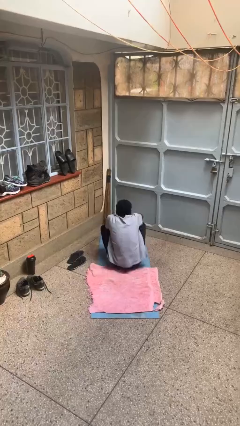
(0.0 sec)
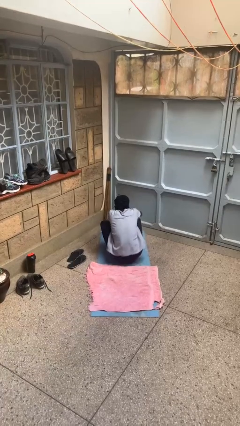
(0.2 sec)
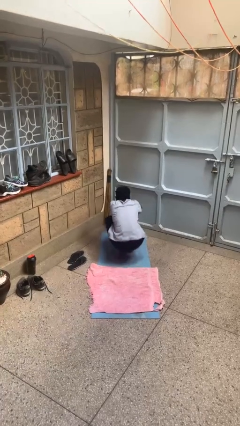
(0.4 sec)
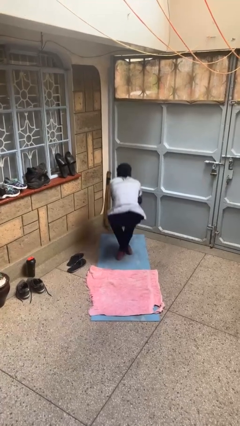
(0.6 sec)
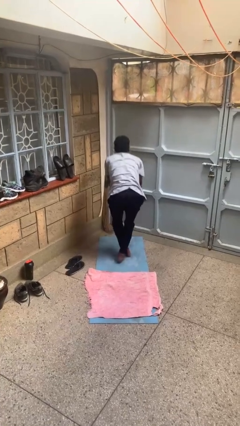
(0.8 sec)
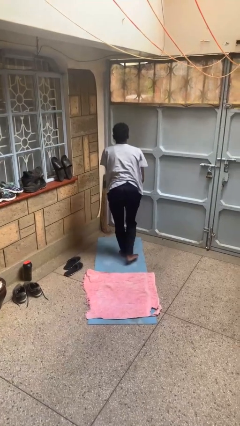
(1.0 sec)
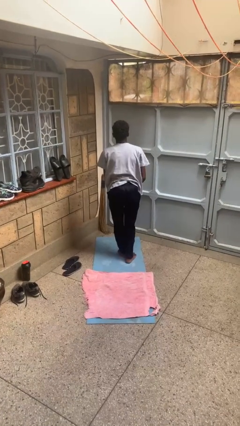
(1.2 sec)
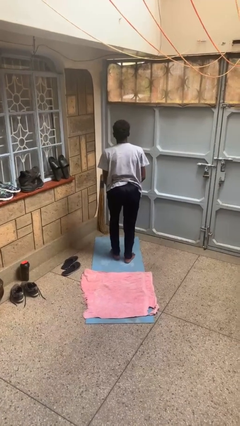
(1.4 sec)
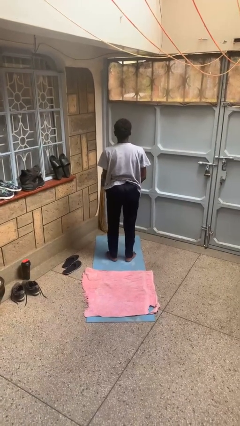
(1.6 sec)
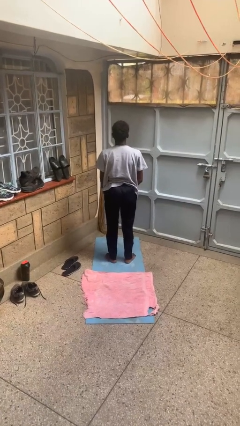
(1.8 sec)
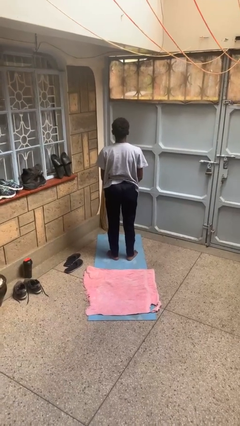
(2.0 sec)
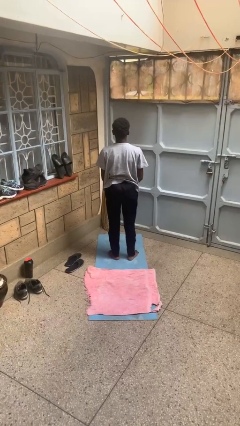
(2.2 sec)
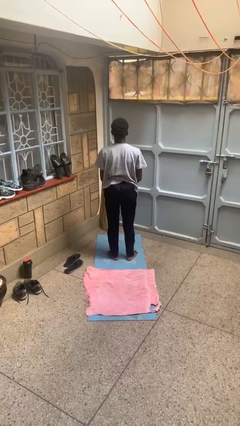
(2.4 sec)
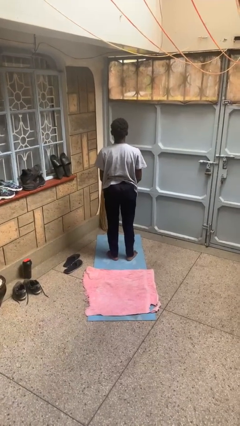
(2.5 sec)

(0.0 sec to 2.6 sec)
person stands up from floor

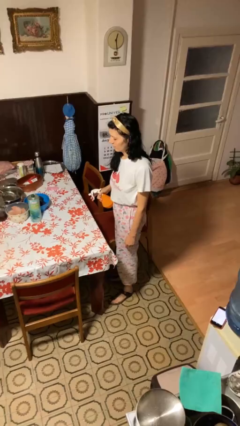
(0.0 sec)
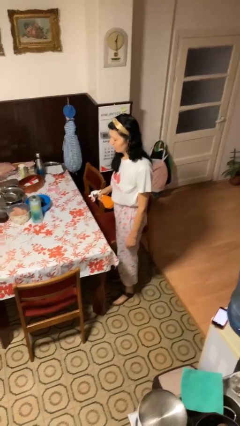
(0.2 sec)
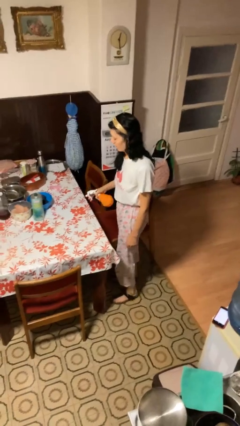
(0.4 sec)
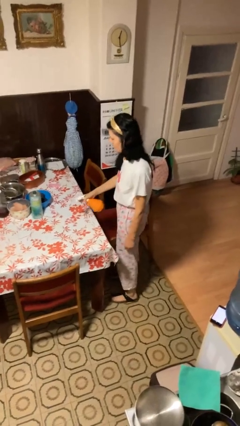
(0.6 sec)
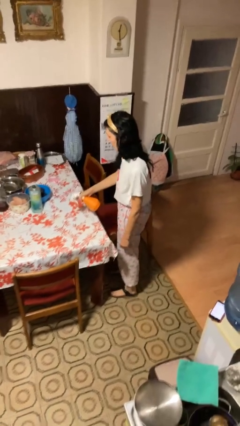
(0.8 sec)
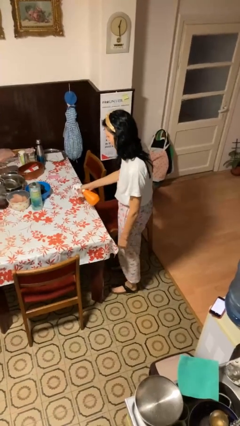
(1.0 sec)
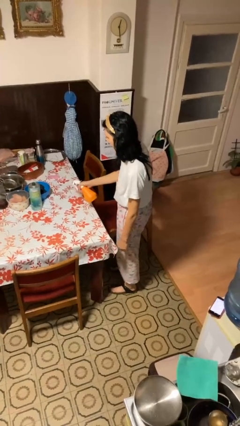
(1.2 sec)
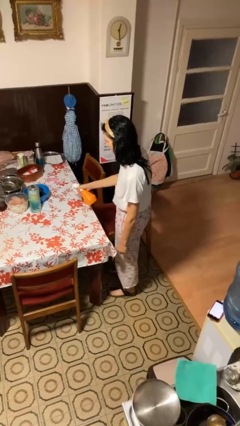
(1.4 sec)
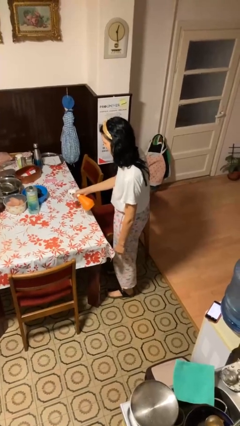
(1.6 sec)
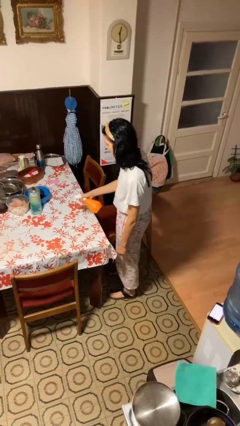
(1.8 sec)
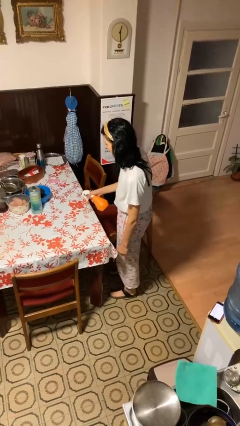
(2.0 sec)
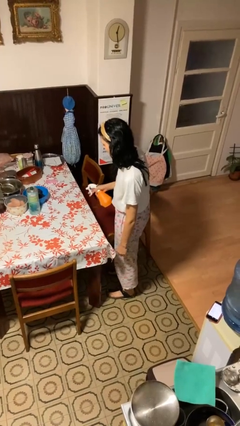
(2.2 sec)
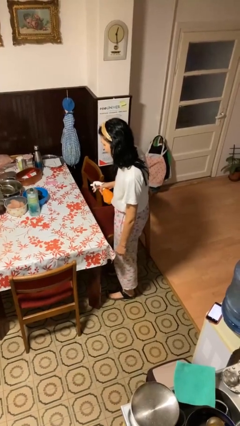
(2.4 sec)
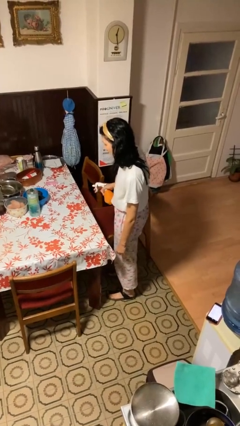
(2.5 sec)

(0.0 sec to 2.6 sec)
person sprays from bottle

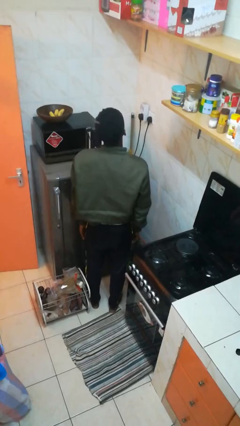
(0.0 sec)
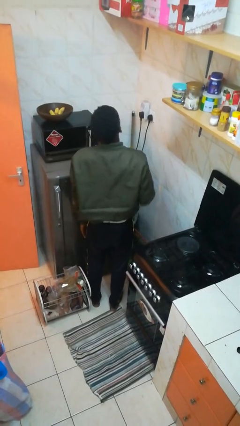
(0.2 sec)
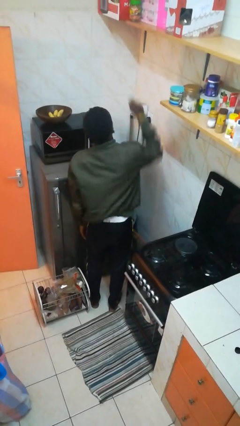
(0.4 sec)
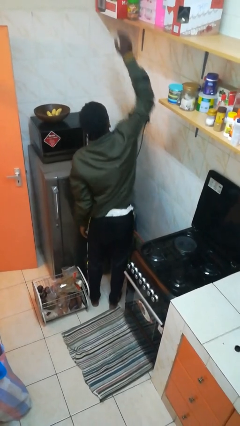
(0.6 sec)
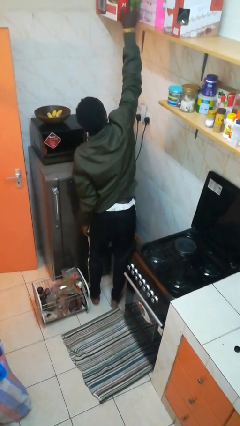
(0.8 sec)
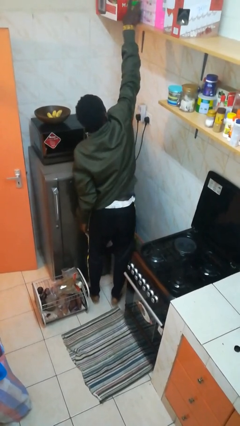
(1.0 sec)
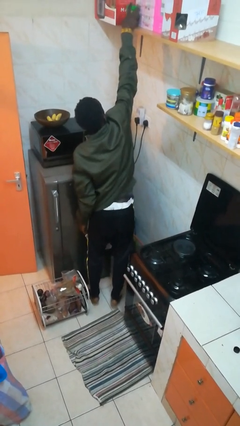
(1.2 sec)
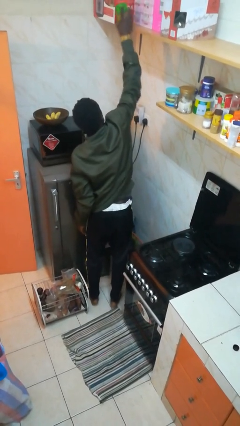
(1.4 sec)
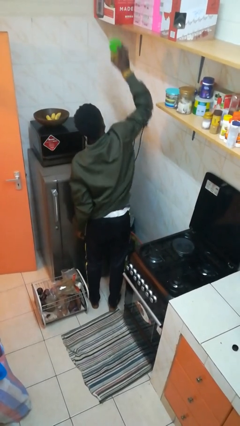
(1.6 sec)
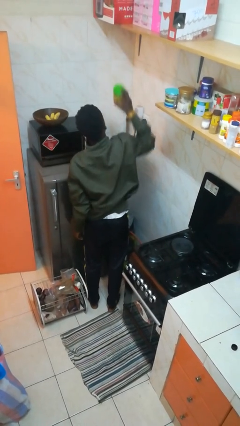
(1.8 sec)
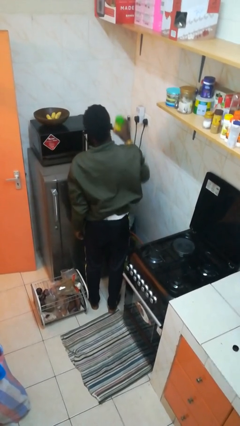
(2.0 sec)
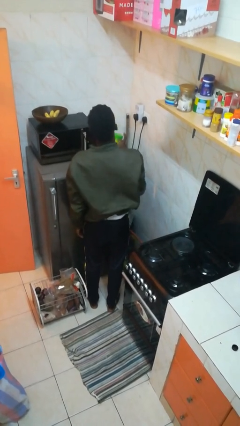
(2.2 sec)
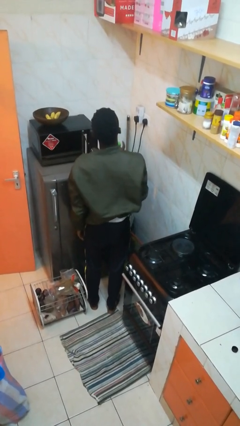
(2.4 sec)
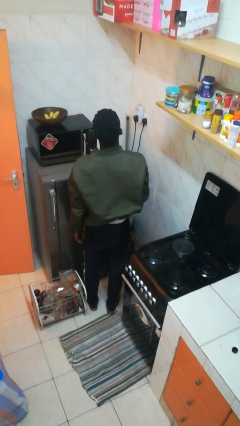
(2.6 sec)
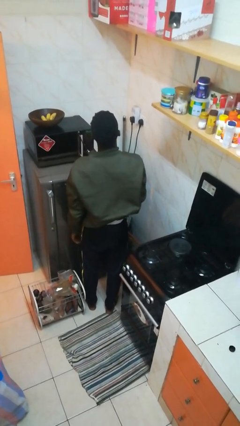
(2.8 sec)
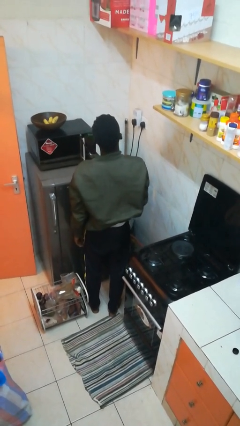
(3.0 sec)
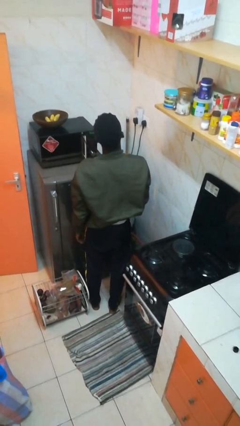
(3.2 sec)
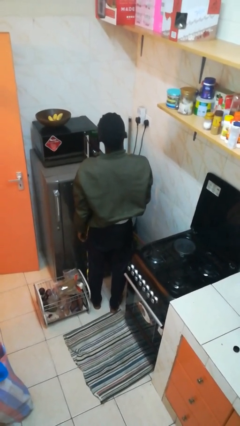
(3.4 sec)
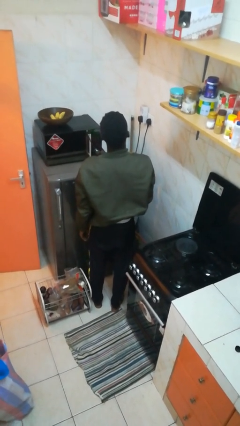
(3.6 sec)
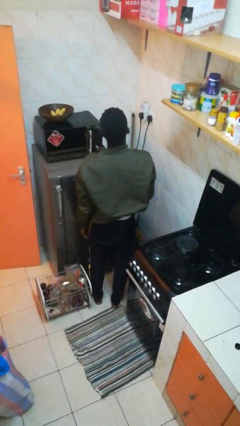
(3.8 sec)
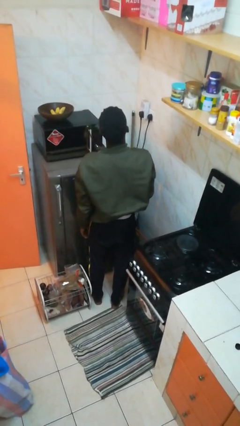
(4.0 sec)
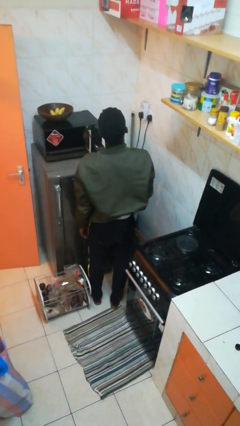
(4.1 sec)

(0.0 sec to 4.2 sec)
person picks up object from shelf

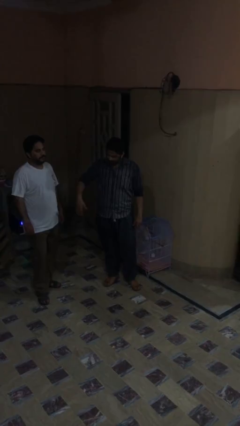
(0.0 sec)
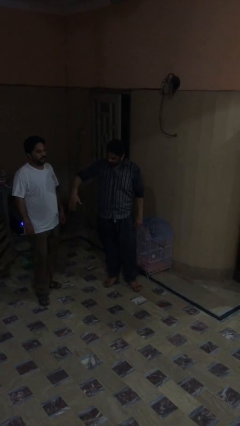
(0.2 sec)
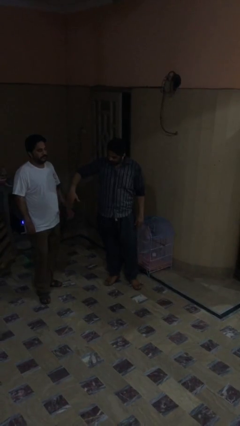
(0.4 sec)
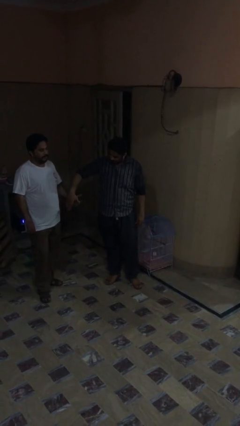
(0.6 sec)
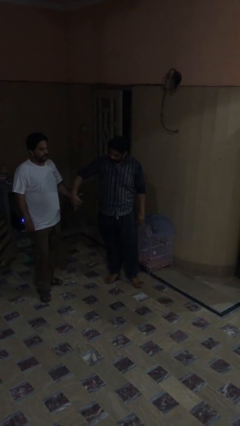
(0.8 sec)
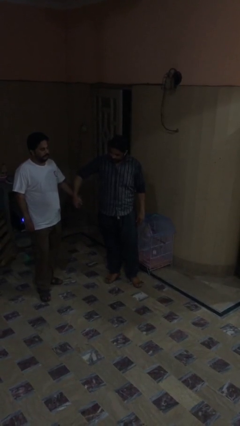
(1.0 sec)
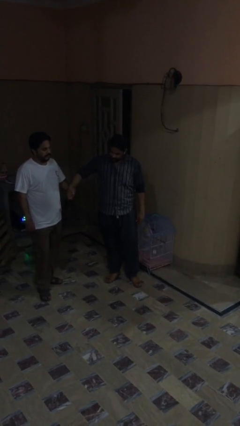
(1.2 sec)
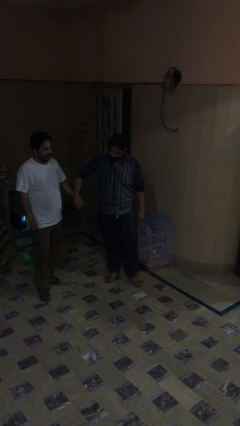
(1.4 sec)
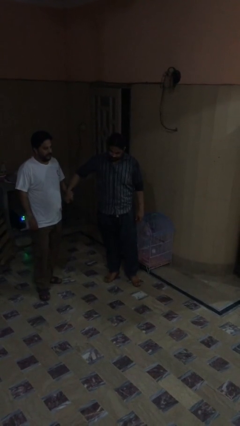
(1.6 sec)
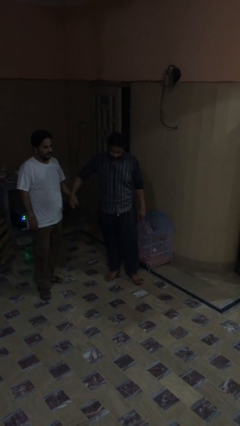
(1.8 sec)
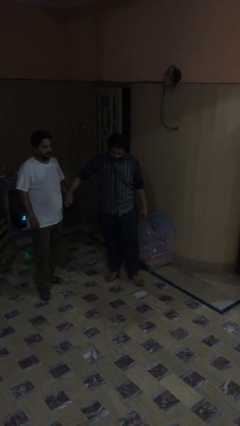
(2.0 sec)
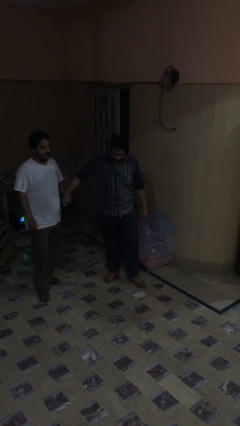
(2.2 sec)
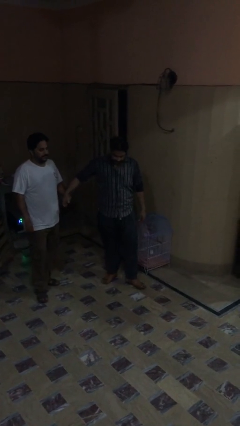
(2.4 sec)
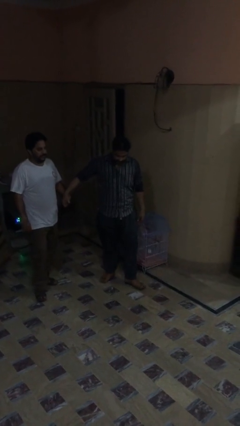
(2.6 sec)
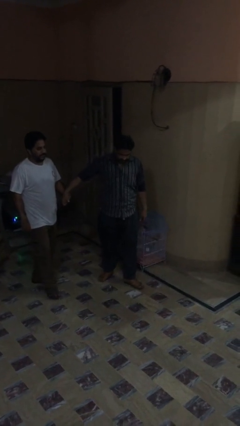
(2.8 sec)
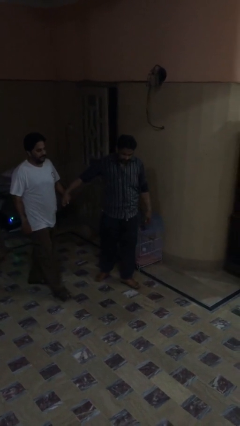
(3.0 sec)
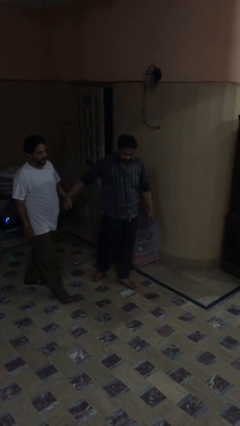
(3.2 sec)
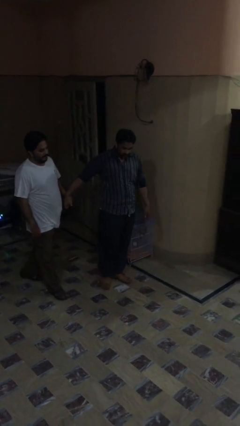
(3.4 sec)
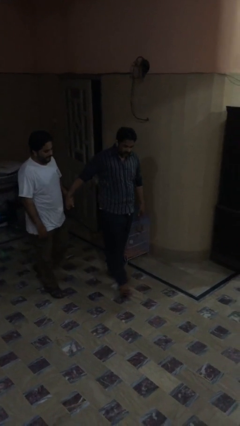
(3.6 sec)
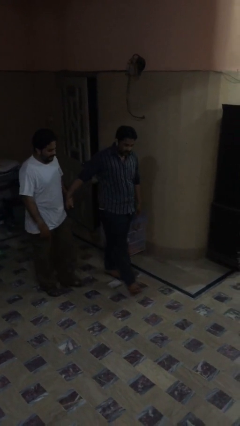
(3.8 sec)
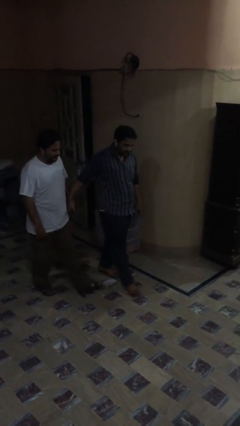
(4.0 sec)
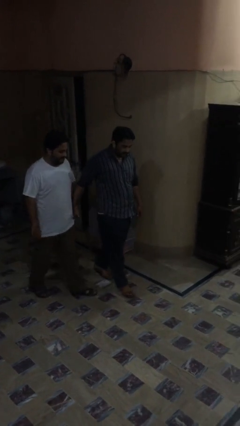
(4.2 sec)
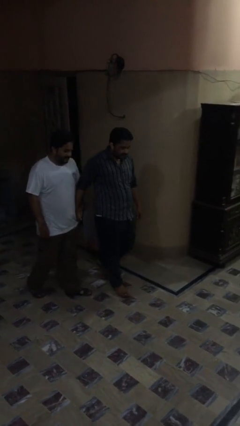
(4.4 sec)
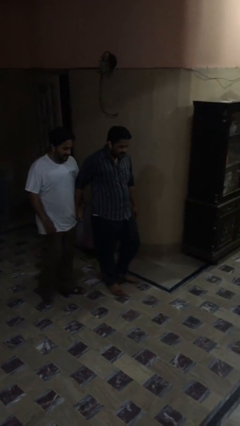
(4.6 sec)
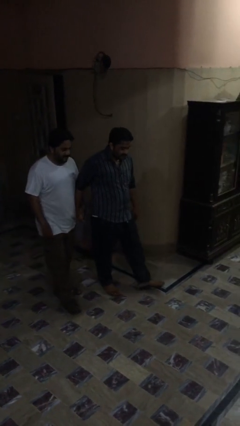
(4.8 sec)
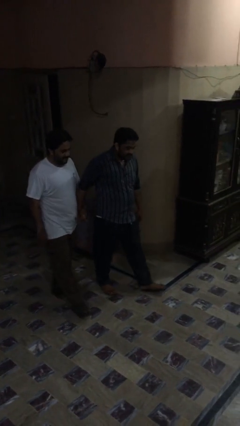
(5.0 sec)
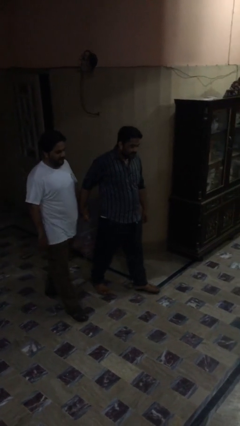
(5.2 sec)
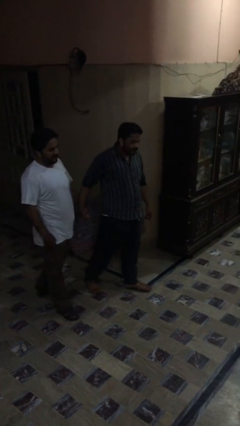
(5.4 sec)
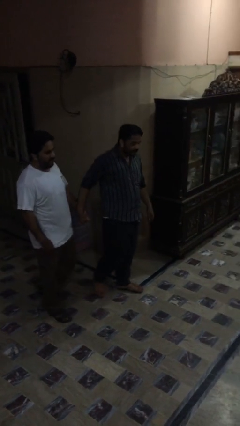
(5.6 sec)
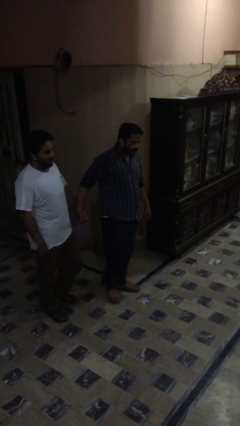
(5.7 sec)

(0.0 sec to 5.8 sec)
person holds hand

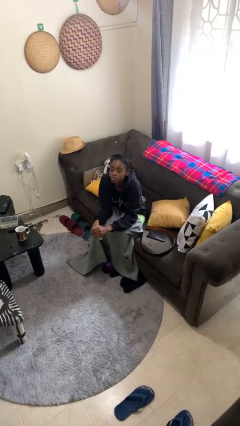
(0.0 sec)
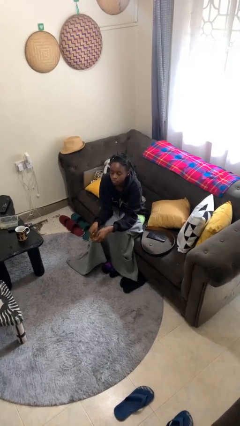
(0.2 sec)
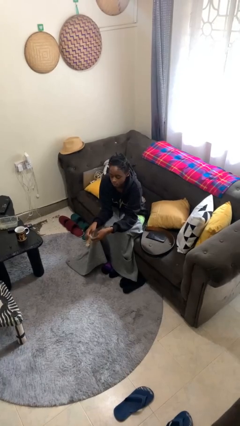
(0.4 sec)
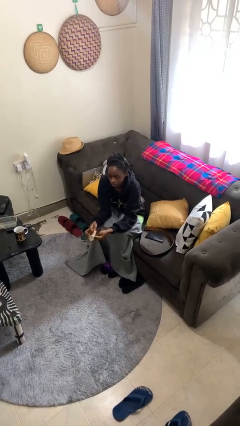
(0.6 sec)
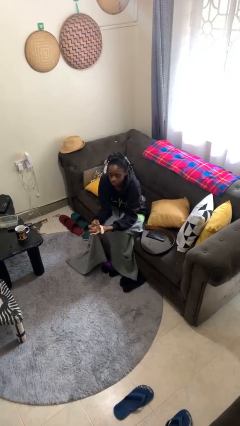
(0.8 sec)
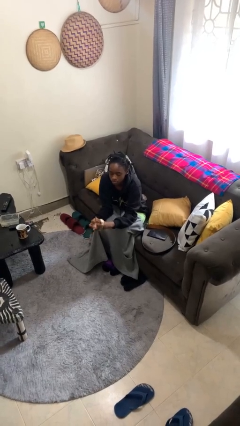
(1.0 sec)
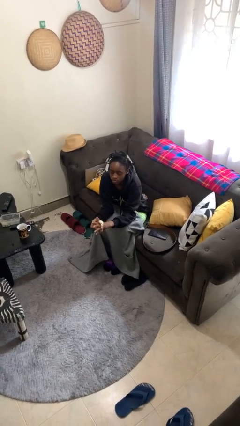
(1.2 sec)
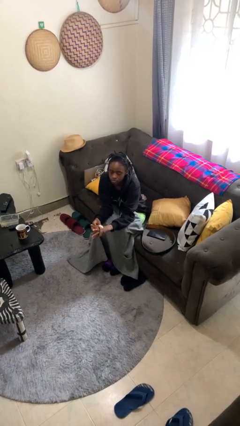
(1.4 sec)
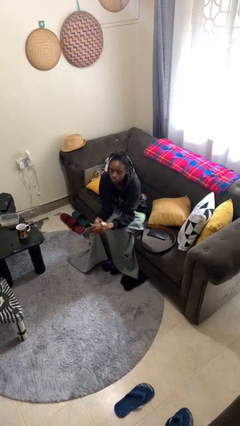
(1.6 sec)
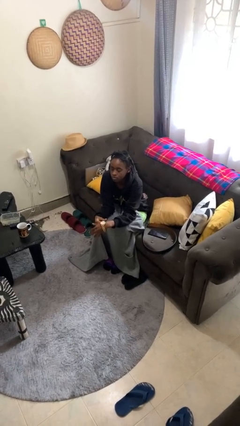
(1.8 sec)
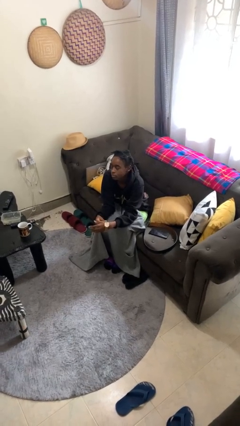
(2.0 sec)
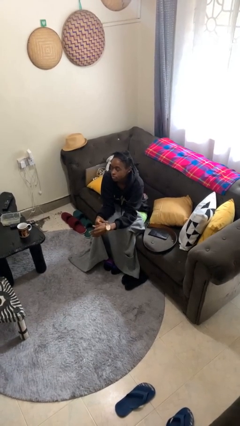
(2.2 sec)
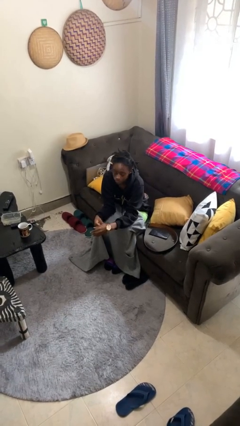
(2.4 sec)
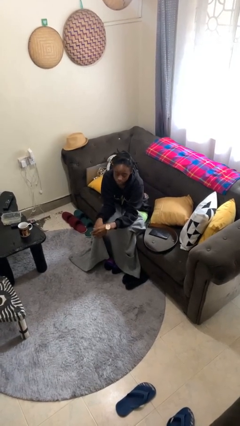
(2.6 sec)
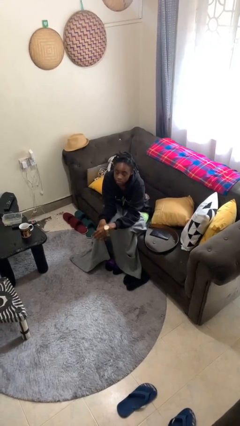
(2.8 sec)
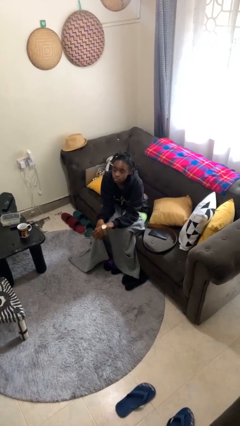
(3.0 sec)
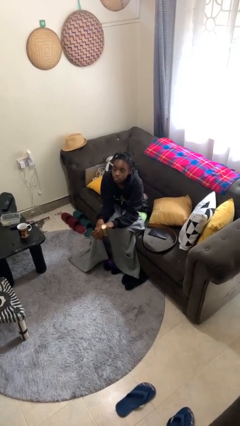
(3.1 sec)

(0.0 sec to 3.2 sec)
person puts on wristwatch
